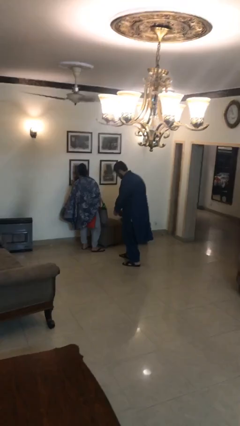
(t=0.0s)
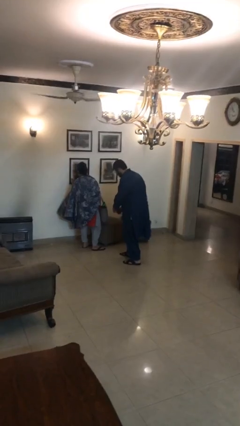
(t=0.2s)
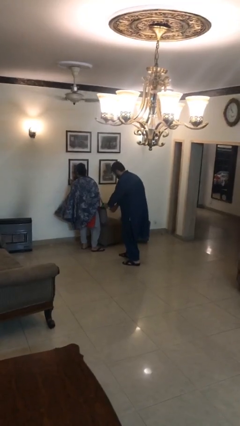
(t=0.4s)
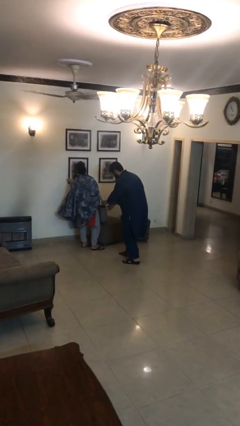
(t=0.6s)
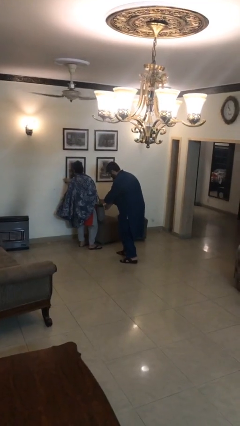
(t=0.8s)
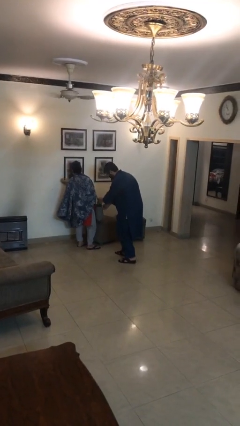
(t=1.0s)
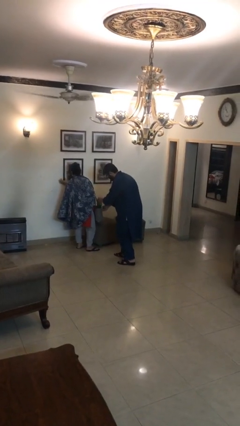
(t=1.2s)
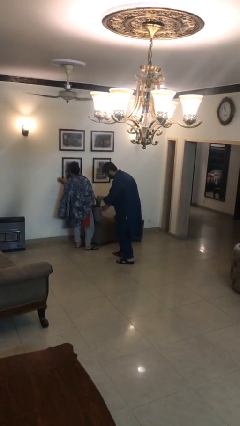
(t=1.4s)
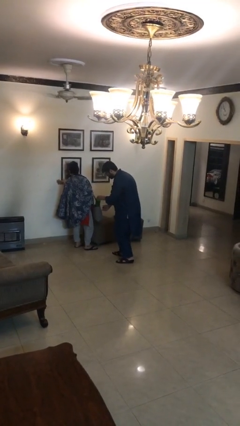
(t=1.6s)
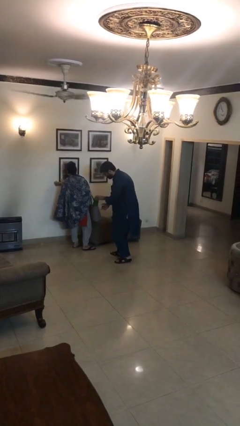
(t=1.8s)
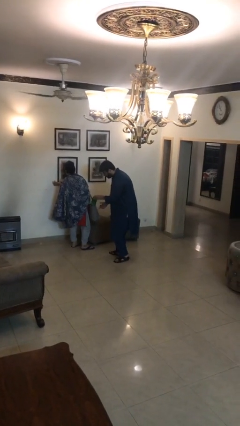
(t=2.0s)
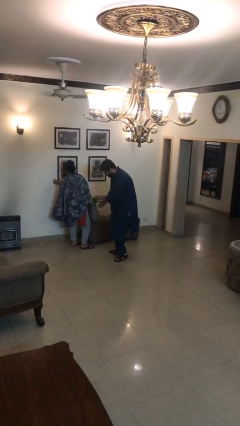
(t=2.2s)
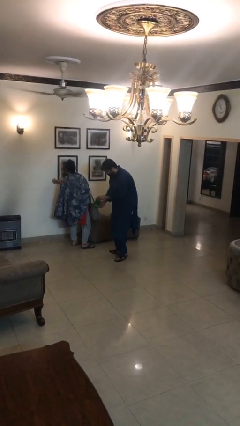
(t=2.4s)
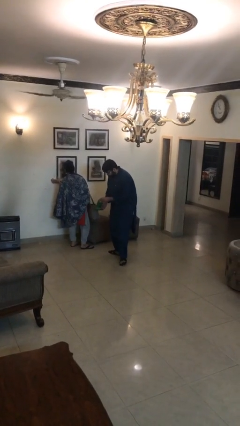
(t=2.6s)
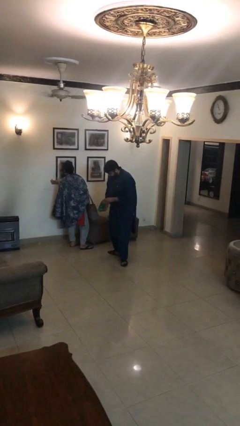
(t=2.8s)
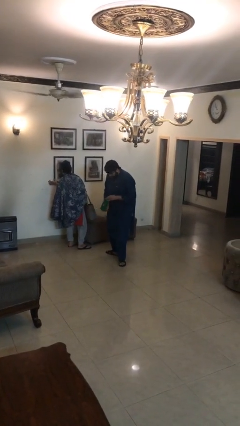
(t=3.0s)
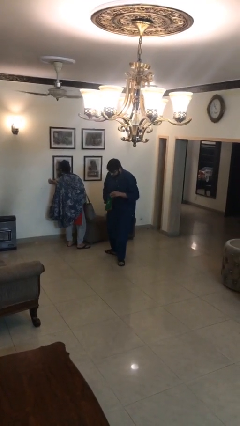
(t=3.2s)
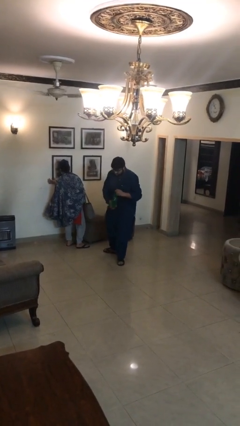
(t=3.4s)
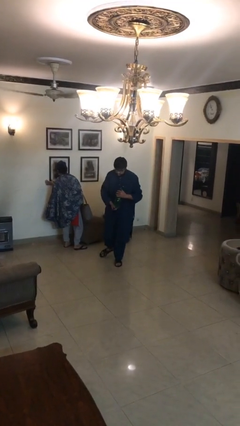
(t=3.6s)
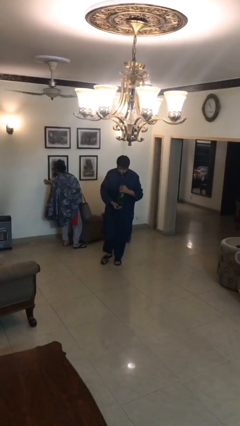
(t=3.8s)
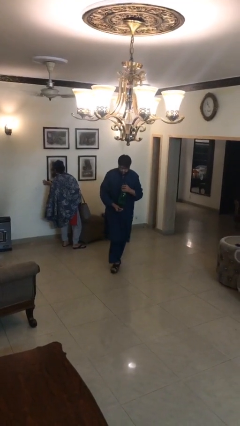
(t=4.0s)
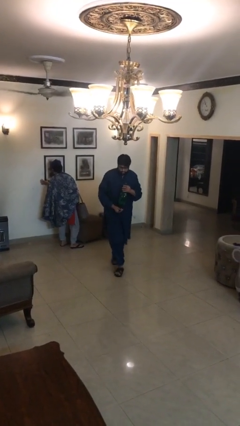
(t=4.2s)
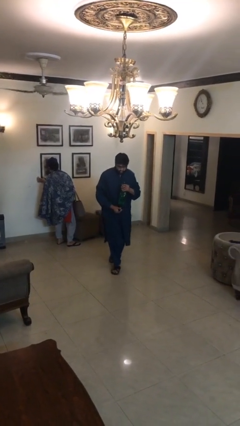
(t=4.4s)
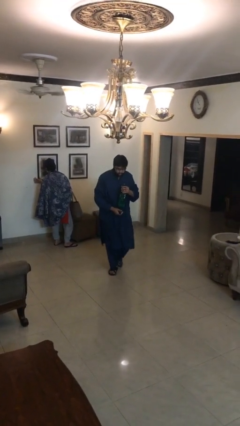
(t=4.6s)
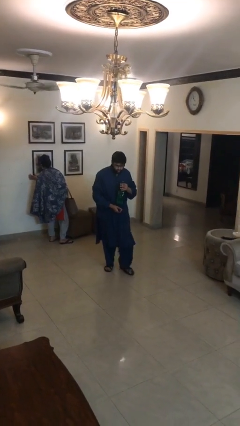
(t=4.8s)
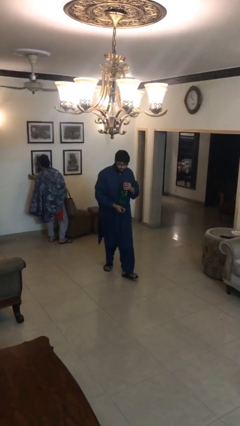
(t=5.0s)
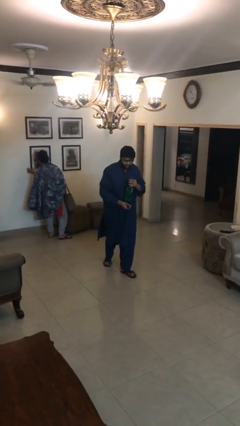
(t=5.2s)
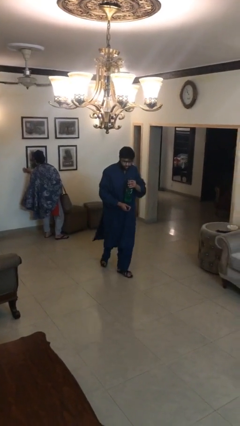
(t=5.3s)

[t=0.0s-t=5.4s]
person steals object from person

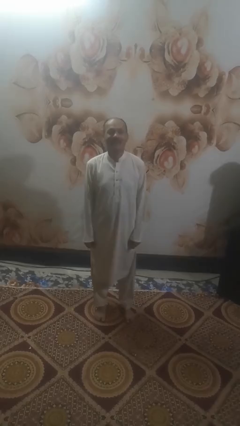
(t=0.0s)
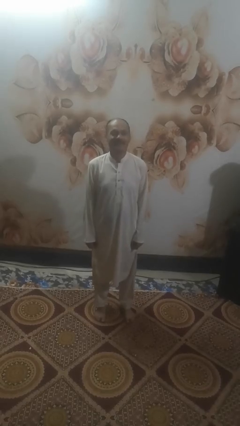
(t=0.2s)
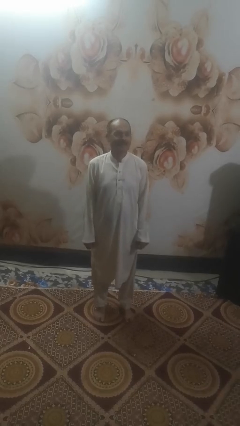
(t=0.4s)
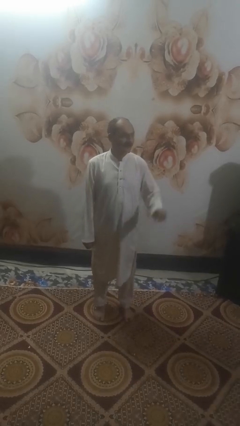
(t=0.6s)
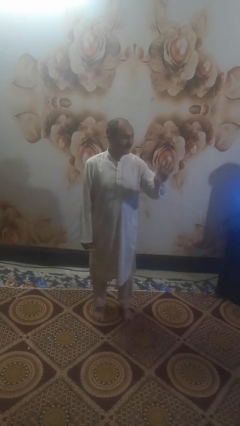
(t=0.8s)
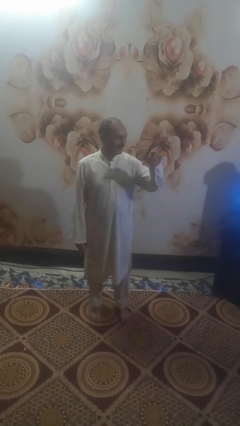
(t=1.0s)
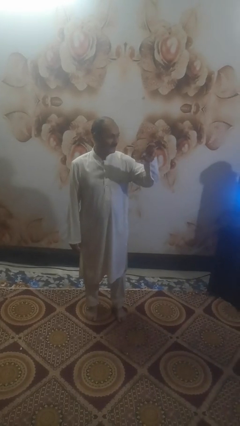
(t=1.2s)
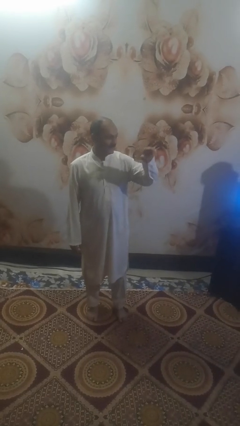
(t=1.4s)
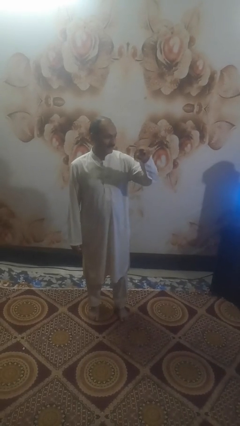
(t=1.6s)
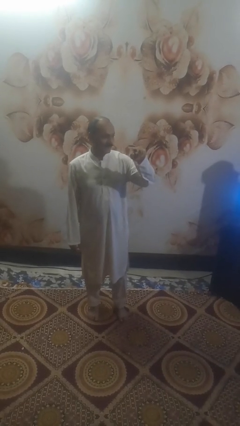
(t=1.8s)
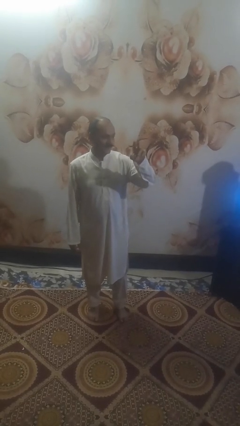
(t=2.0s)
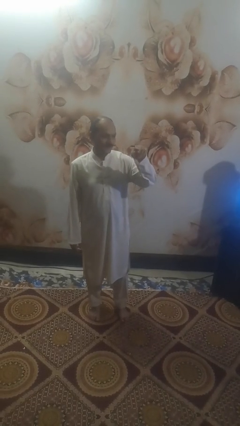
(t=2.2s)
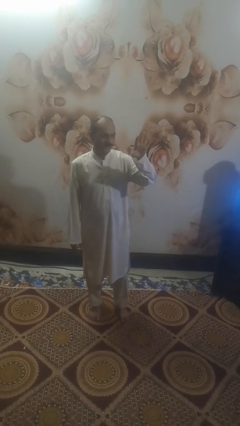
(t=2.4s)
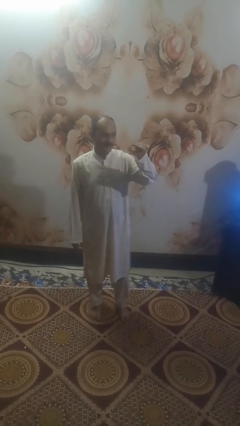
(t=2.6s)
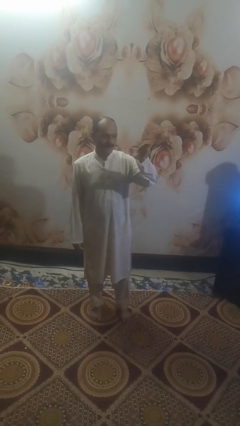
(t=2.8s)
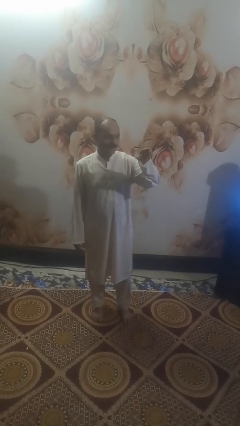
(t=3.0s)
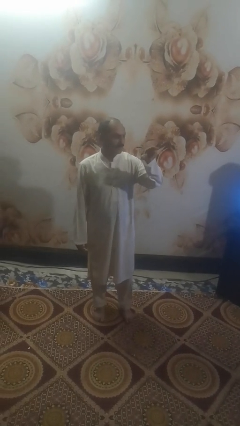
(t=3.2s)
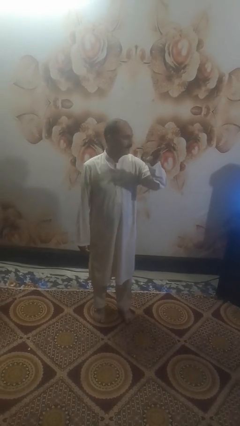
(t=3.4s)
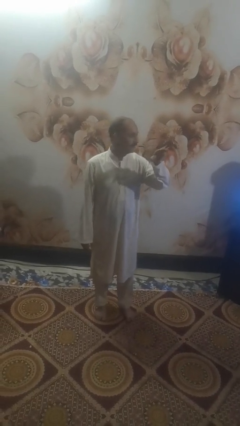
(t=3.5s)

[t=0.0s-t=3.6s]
person gestures come here

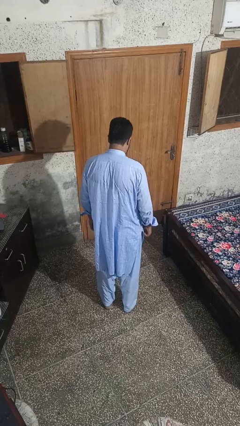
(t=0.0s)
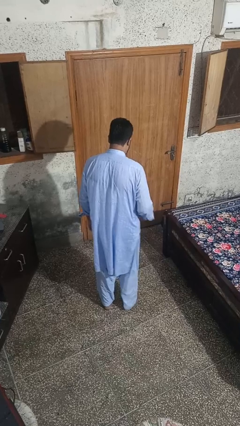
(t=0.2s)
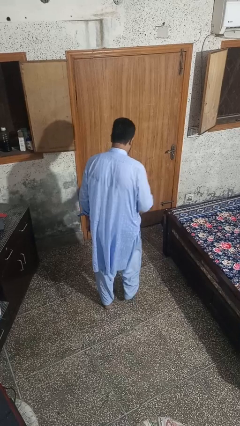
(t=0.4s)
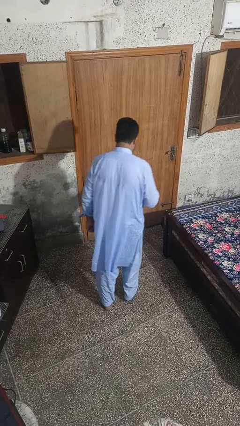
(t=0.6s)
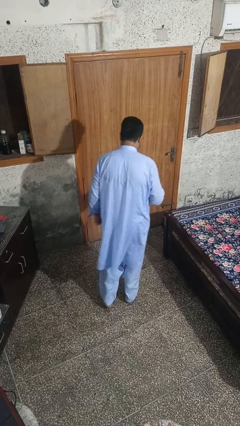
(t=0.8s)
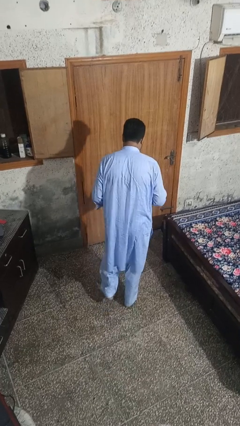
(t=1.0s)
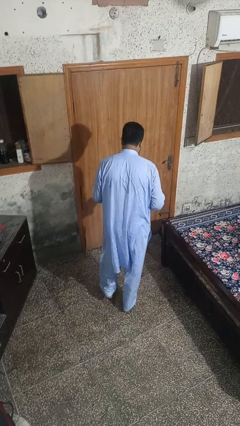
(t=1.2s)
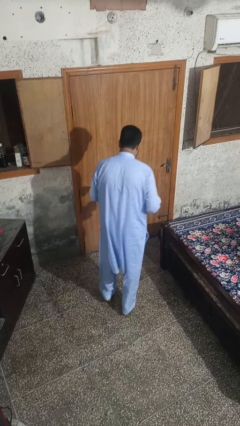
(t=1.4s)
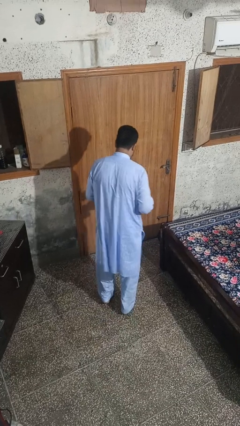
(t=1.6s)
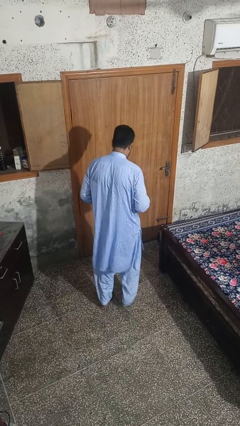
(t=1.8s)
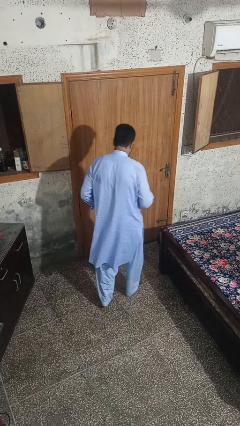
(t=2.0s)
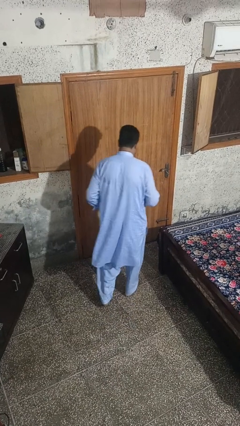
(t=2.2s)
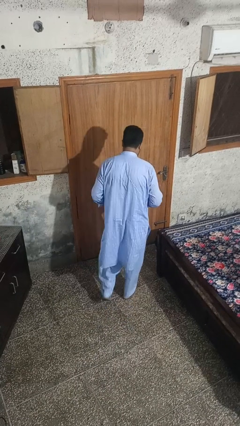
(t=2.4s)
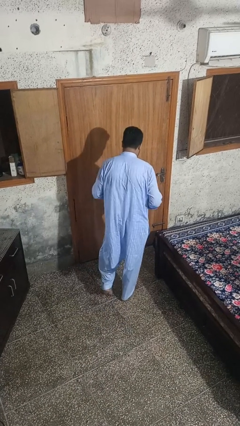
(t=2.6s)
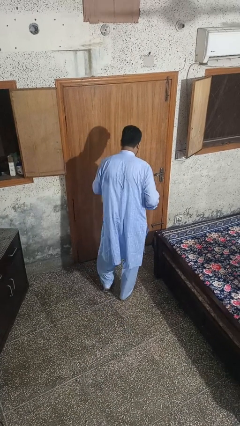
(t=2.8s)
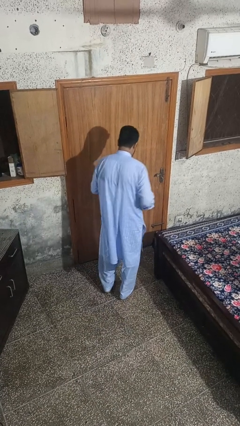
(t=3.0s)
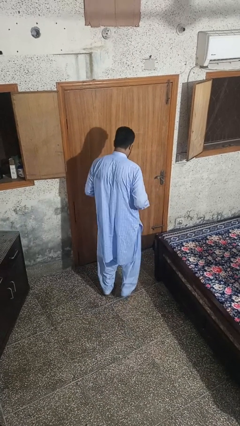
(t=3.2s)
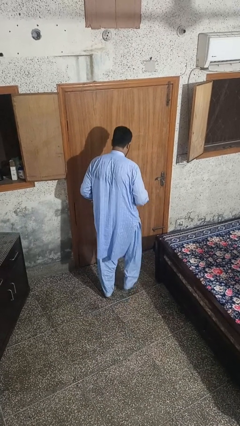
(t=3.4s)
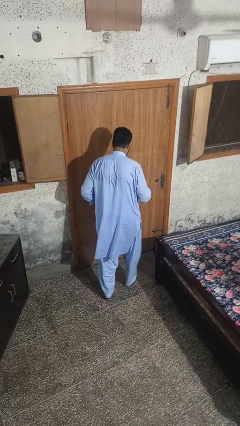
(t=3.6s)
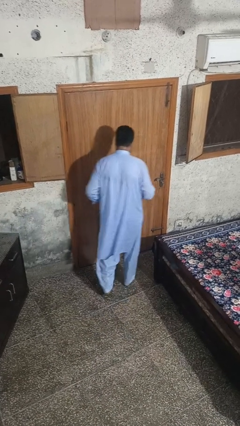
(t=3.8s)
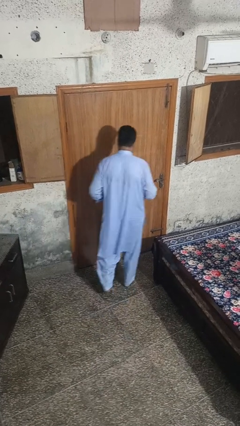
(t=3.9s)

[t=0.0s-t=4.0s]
person walks tiptoe

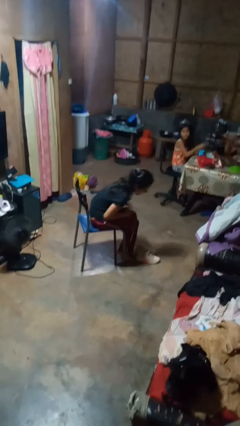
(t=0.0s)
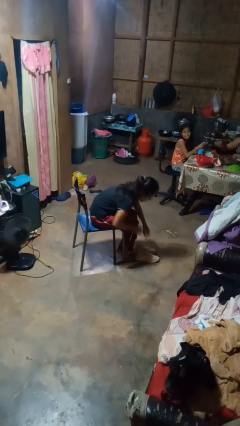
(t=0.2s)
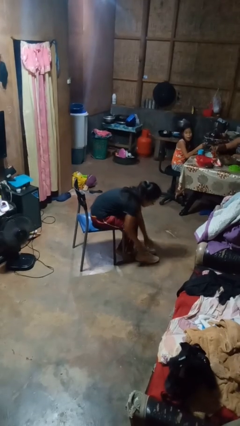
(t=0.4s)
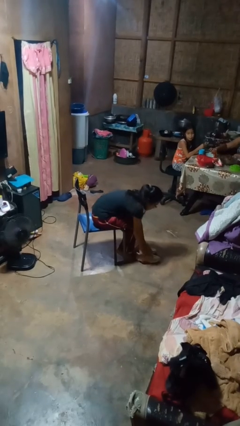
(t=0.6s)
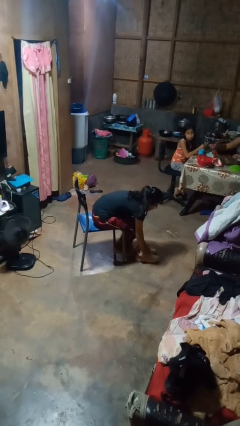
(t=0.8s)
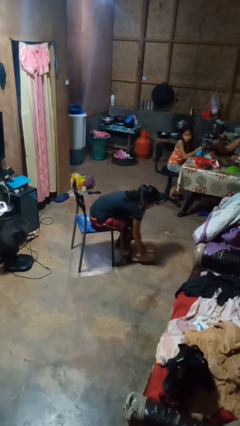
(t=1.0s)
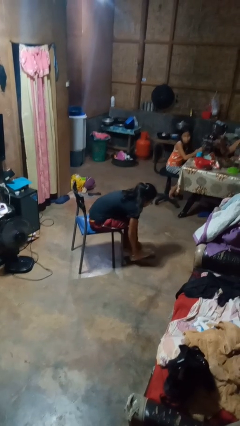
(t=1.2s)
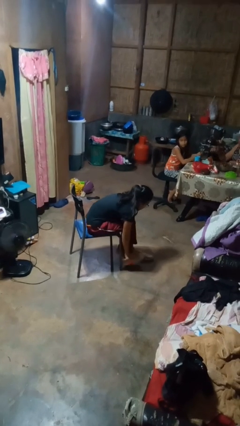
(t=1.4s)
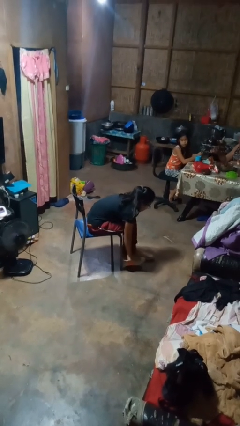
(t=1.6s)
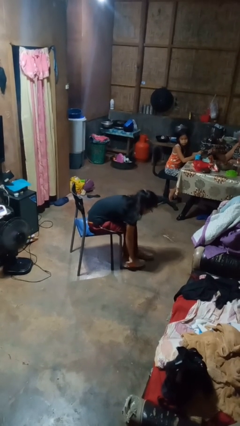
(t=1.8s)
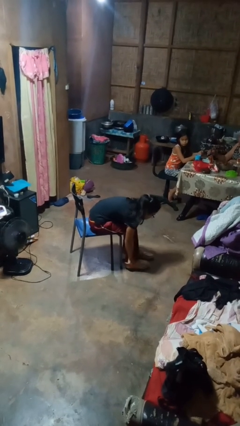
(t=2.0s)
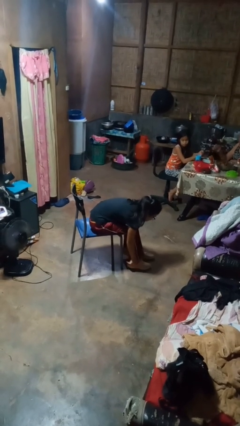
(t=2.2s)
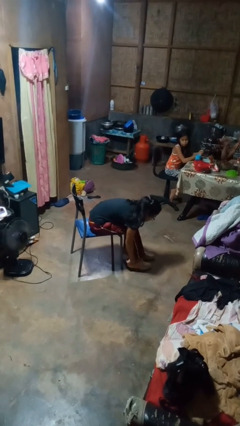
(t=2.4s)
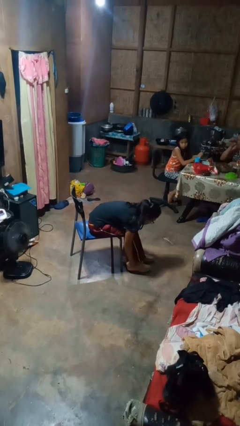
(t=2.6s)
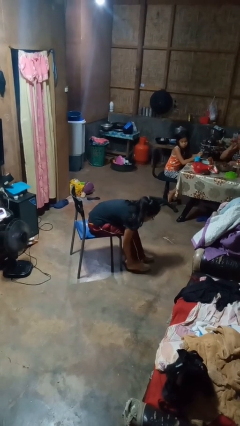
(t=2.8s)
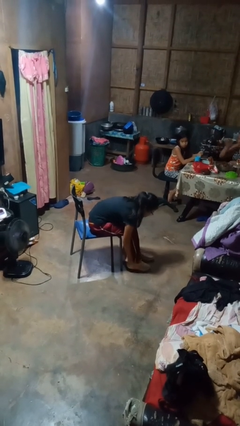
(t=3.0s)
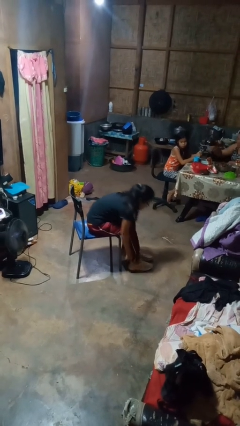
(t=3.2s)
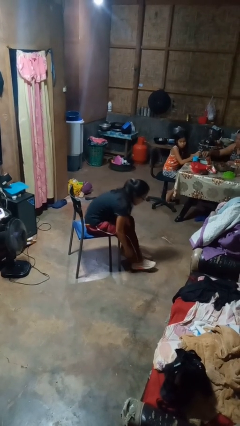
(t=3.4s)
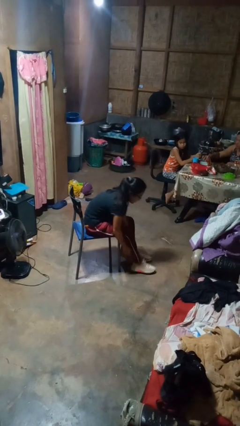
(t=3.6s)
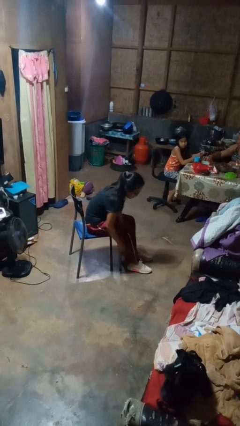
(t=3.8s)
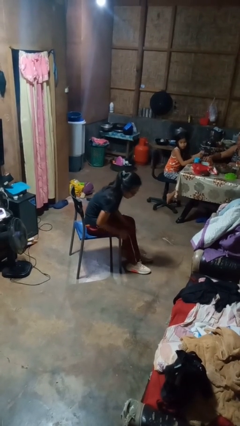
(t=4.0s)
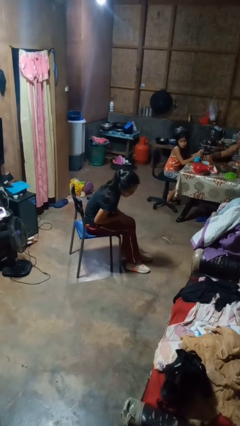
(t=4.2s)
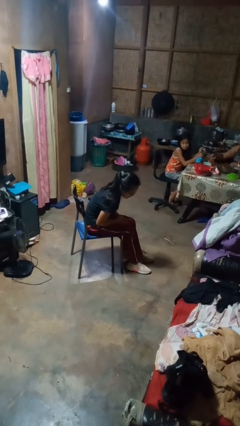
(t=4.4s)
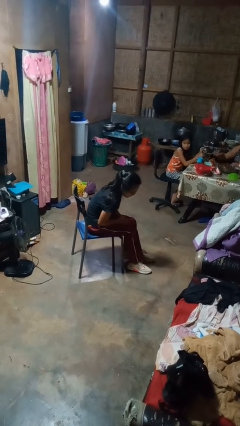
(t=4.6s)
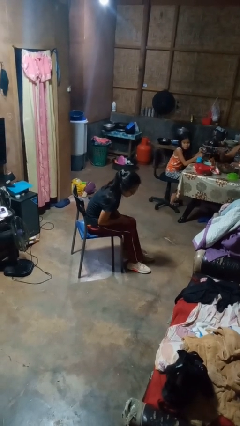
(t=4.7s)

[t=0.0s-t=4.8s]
person puts on shoes
